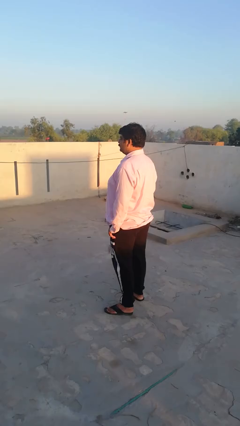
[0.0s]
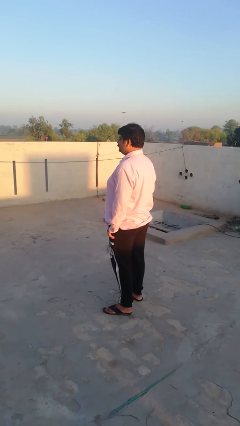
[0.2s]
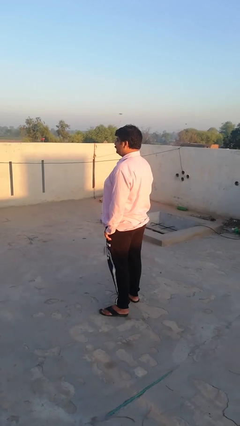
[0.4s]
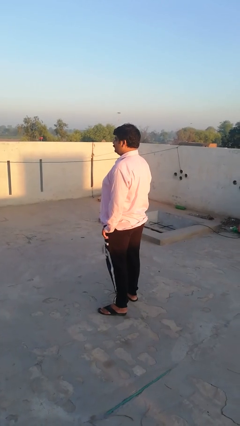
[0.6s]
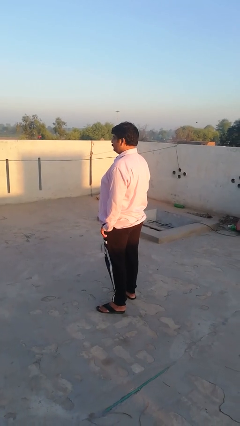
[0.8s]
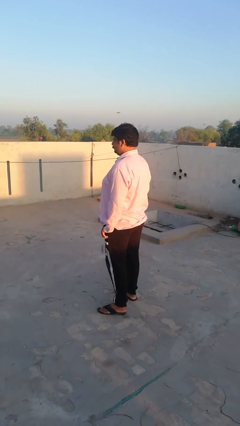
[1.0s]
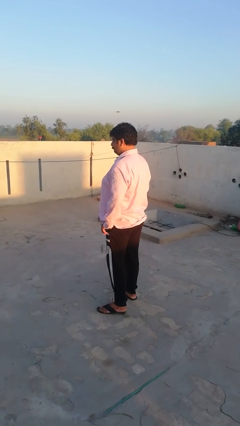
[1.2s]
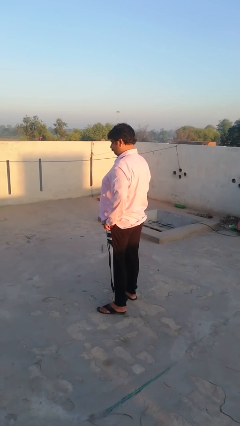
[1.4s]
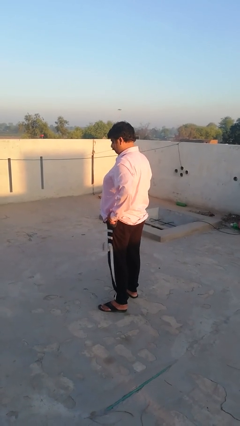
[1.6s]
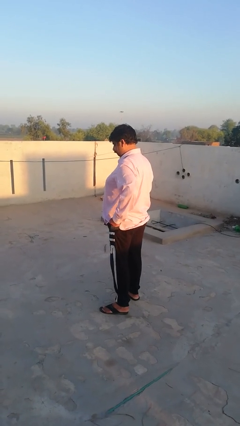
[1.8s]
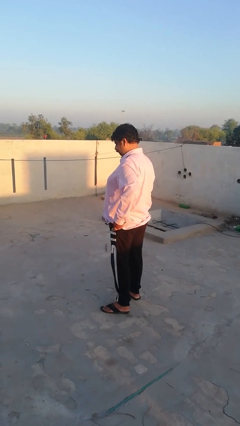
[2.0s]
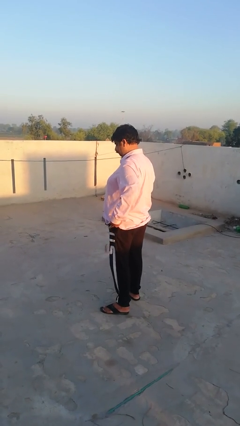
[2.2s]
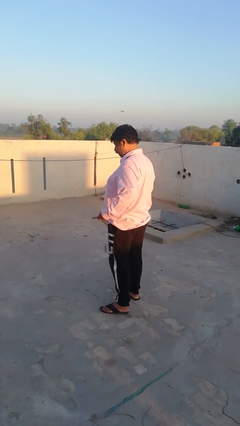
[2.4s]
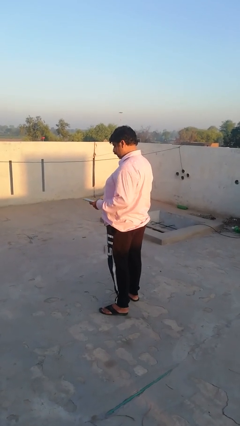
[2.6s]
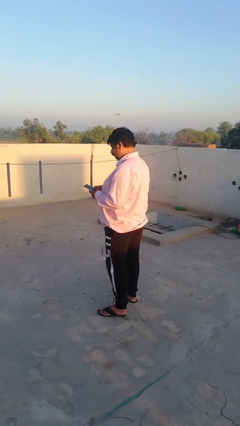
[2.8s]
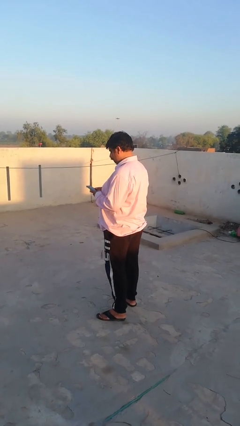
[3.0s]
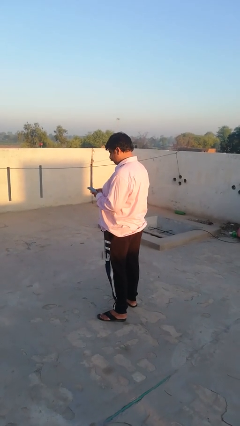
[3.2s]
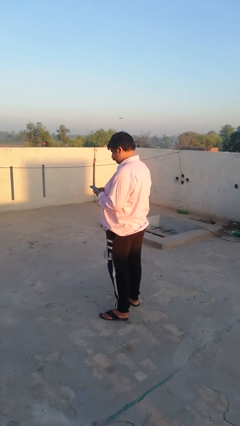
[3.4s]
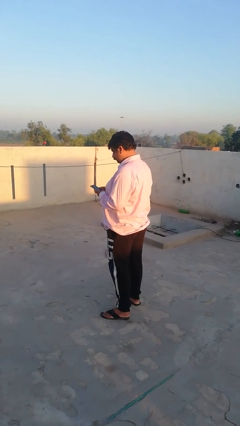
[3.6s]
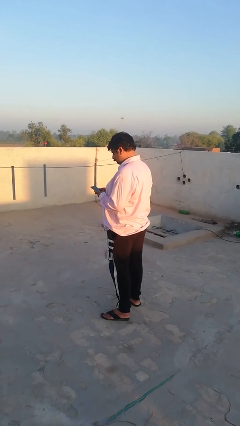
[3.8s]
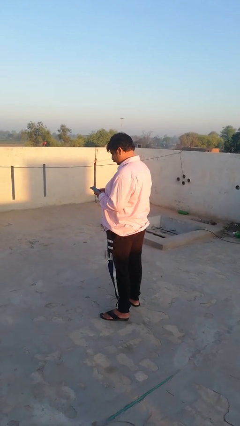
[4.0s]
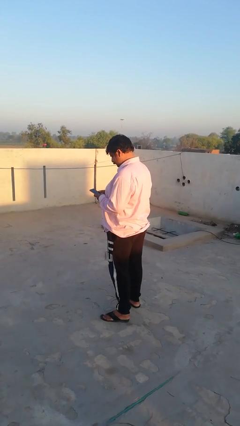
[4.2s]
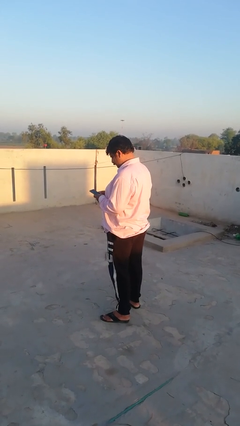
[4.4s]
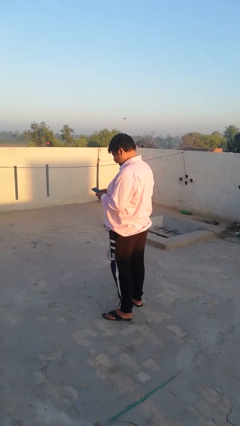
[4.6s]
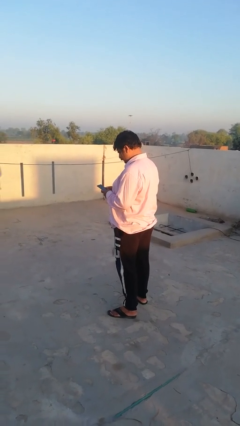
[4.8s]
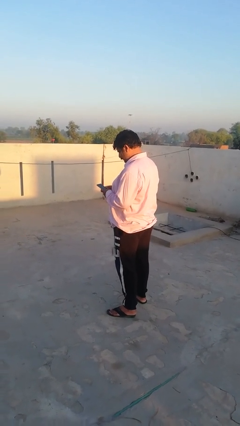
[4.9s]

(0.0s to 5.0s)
person takes phone from pocket

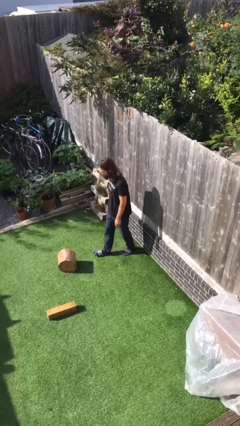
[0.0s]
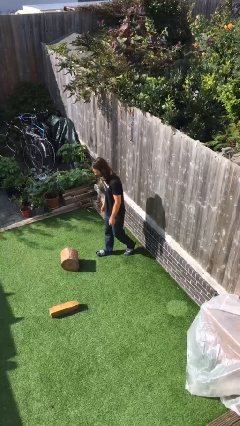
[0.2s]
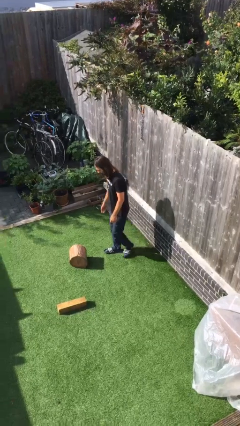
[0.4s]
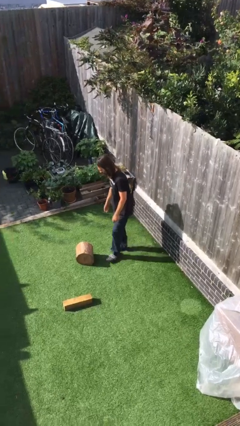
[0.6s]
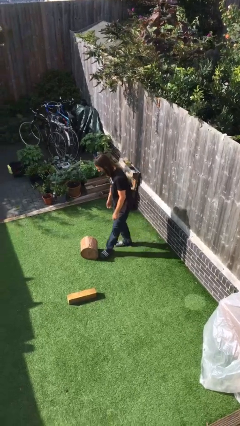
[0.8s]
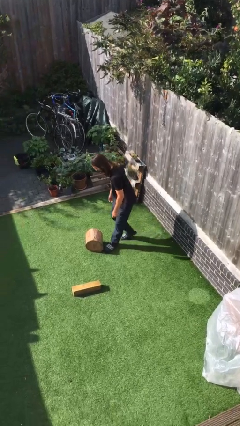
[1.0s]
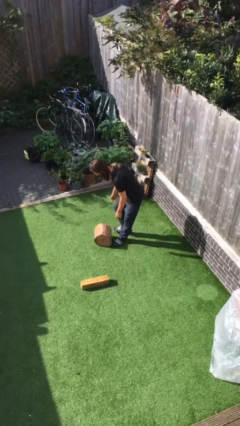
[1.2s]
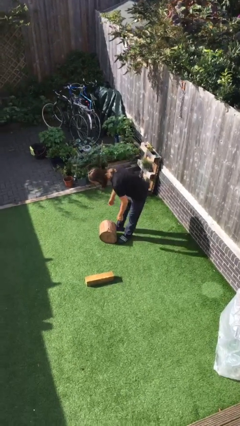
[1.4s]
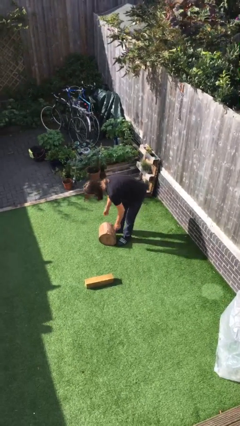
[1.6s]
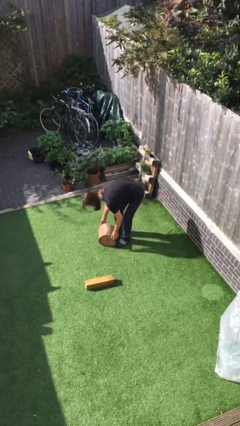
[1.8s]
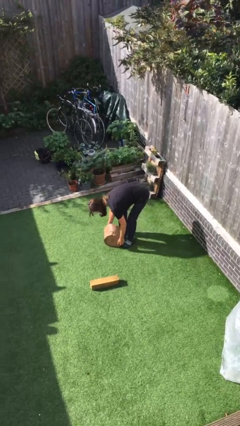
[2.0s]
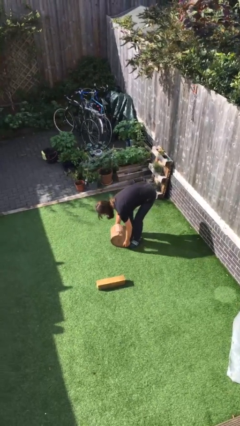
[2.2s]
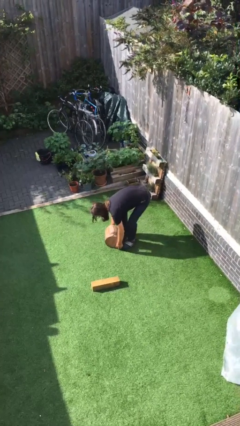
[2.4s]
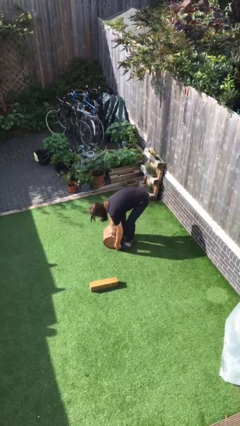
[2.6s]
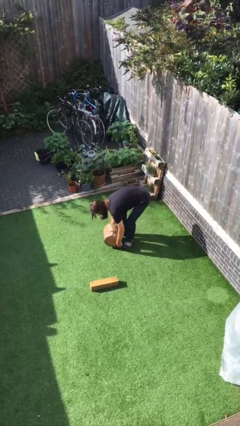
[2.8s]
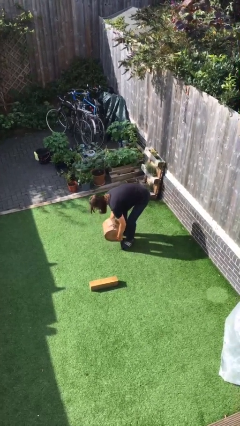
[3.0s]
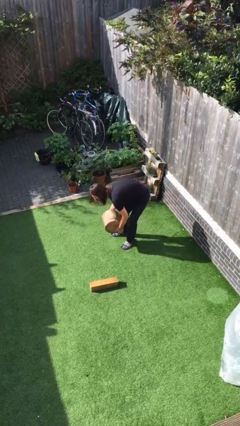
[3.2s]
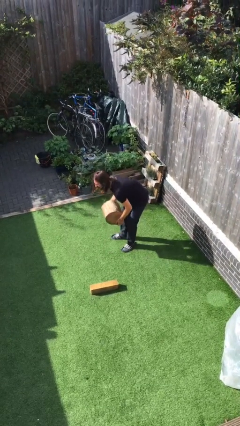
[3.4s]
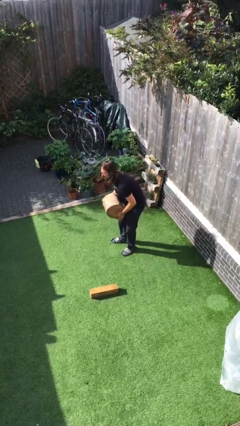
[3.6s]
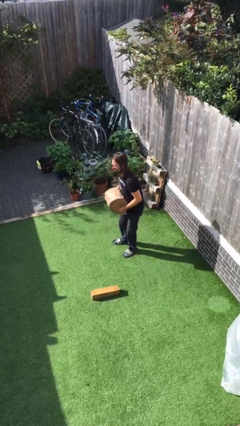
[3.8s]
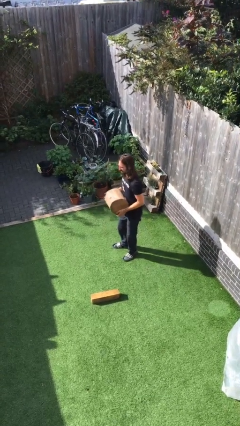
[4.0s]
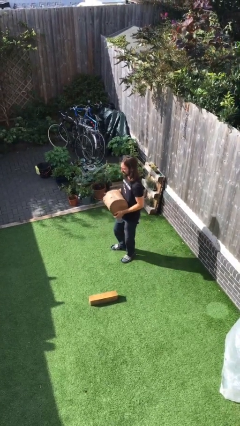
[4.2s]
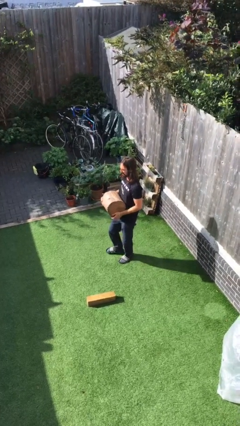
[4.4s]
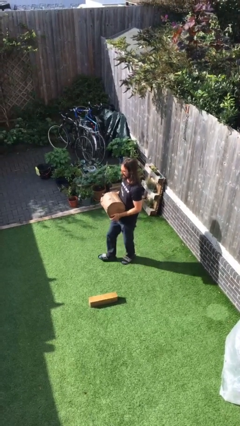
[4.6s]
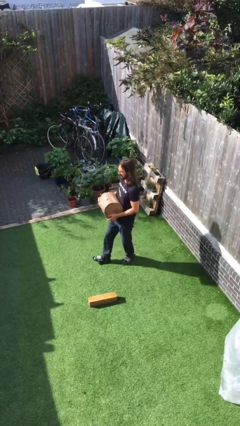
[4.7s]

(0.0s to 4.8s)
person picks up object from floor

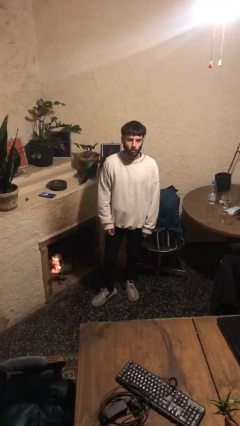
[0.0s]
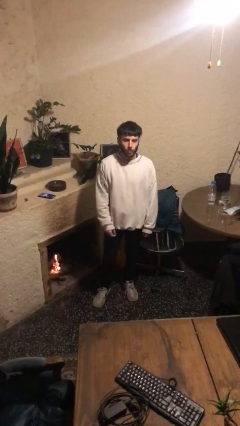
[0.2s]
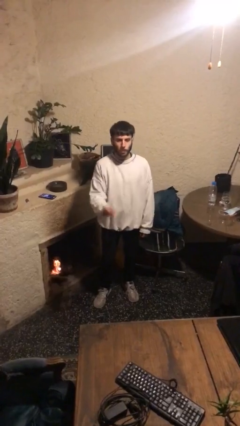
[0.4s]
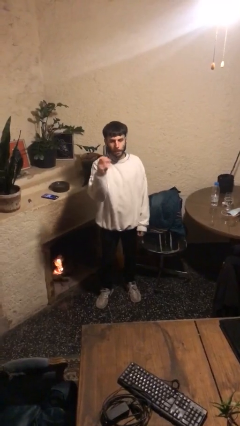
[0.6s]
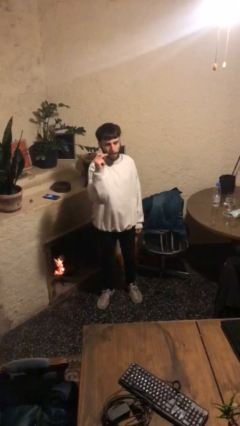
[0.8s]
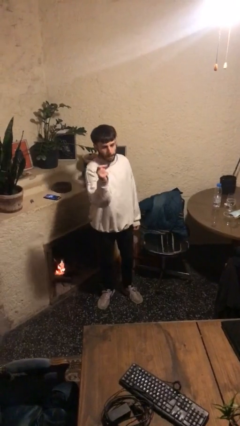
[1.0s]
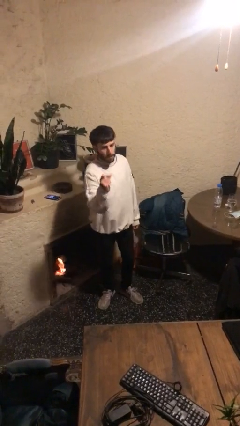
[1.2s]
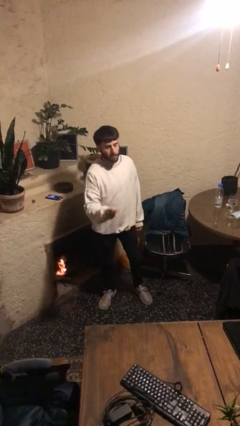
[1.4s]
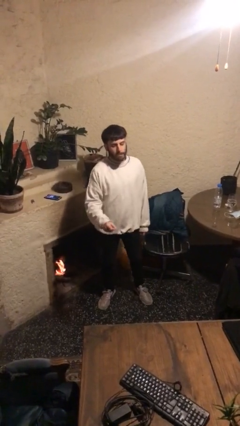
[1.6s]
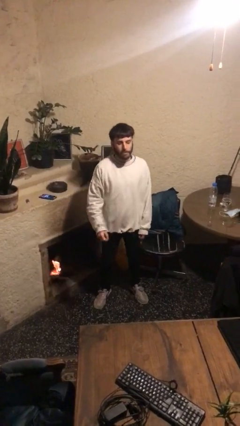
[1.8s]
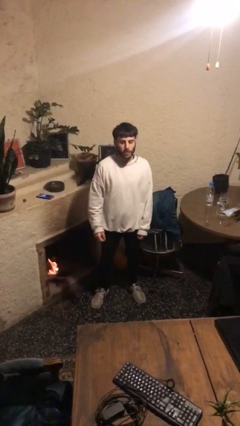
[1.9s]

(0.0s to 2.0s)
person snaps fingers

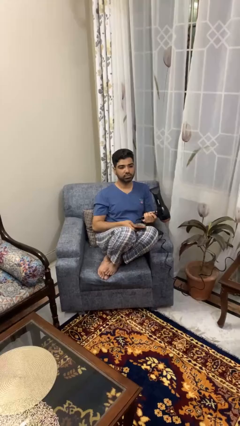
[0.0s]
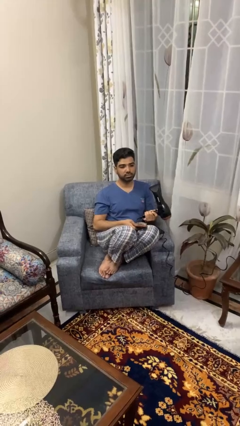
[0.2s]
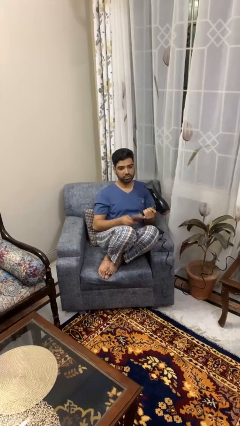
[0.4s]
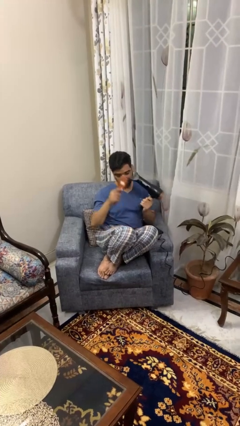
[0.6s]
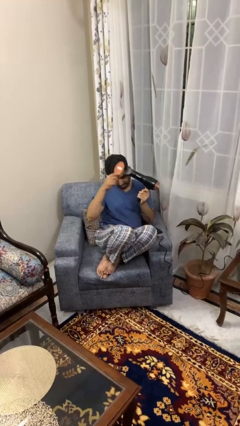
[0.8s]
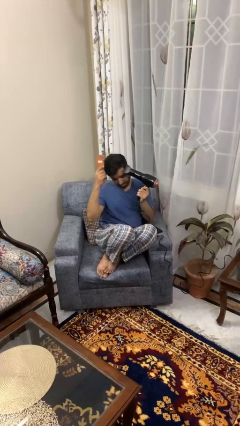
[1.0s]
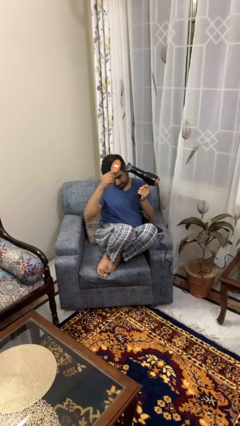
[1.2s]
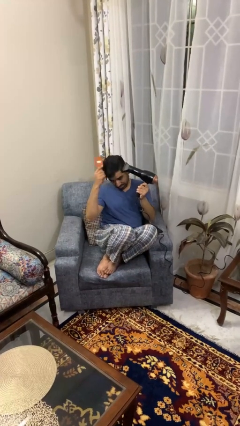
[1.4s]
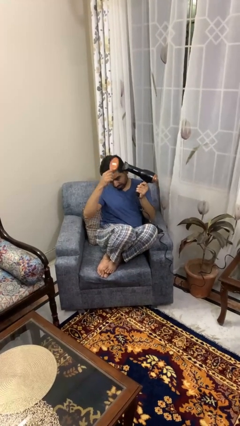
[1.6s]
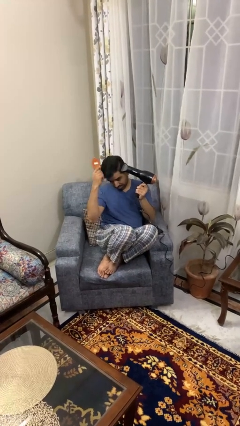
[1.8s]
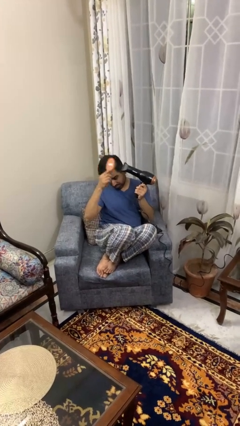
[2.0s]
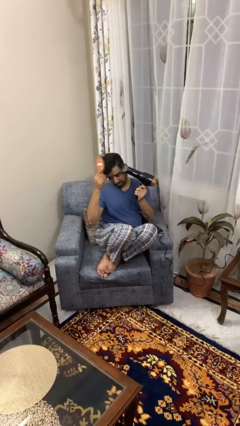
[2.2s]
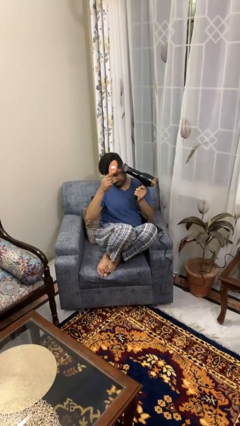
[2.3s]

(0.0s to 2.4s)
person dries hair with hairdryer

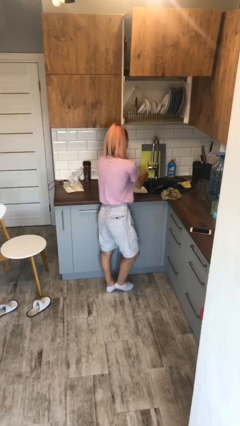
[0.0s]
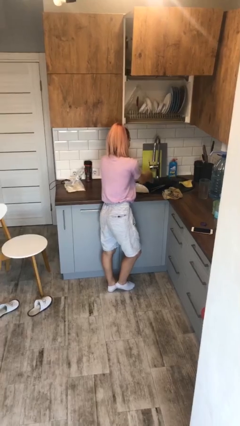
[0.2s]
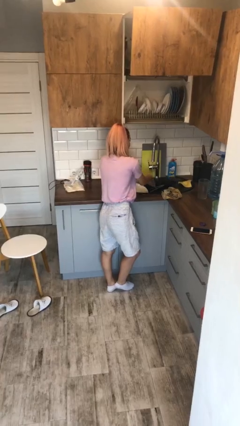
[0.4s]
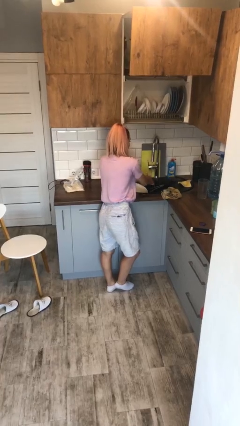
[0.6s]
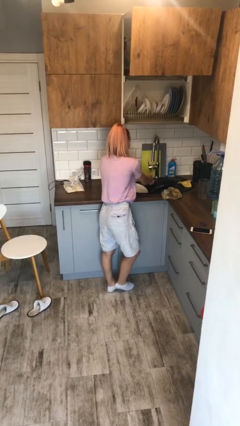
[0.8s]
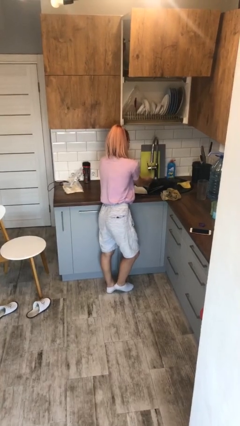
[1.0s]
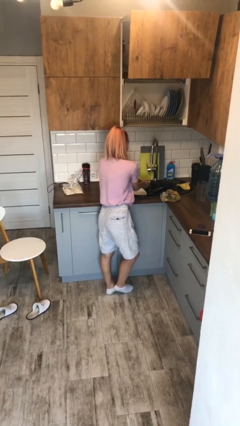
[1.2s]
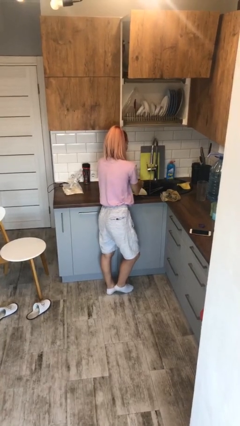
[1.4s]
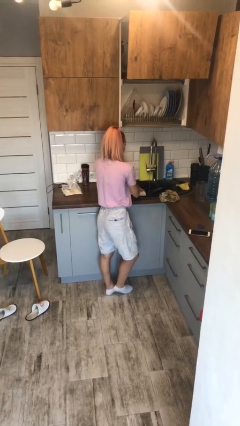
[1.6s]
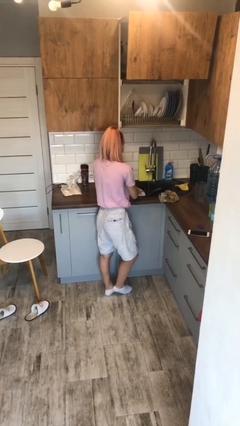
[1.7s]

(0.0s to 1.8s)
person washes hands

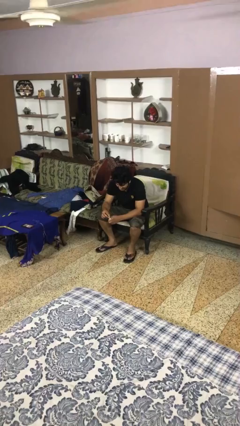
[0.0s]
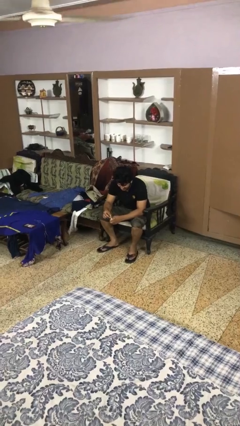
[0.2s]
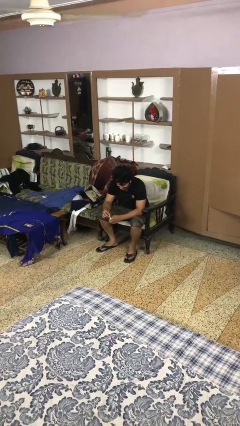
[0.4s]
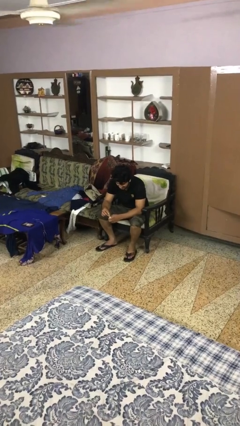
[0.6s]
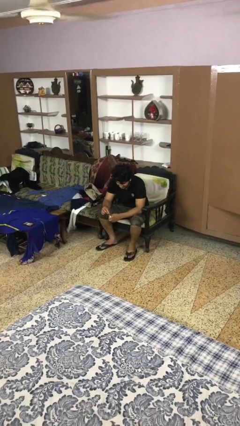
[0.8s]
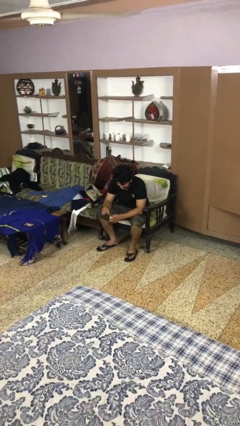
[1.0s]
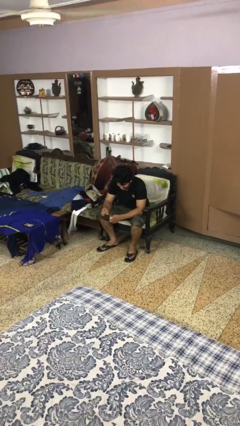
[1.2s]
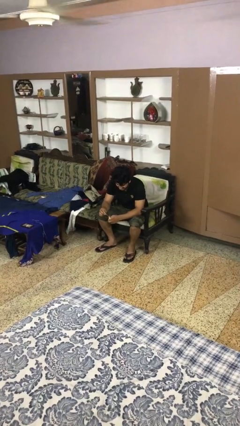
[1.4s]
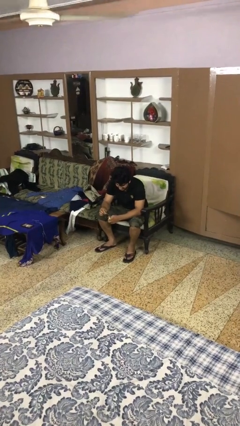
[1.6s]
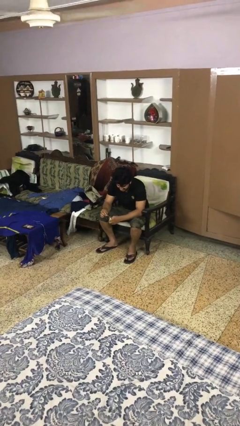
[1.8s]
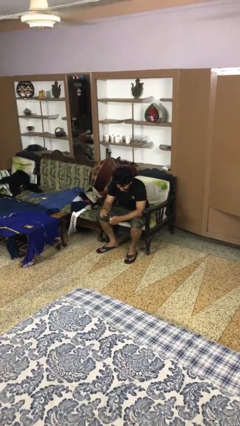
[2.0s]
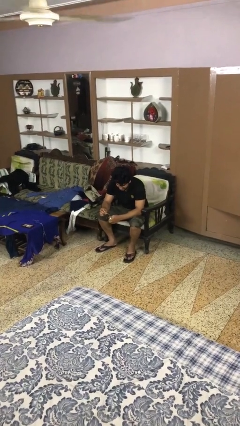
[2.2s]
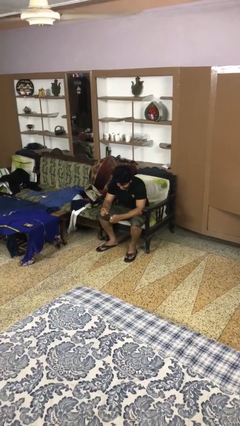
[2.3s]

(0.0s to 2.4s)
person paints fingernails
